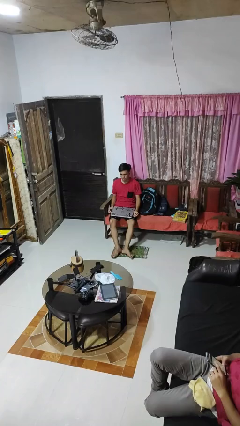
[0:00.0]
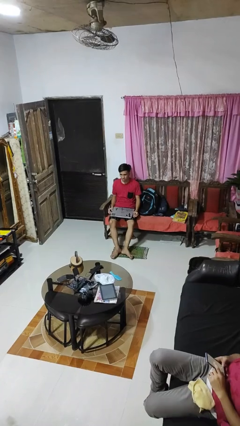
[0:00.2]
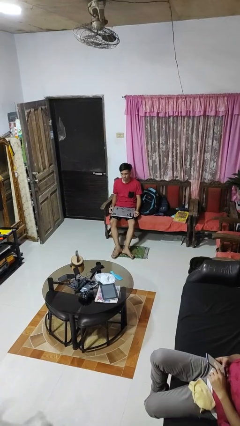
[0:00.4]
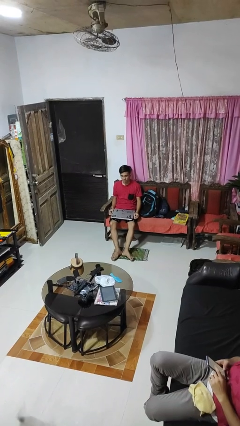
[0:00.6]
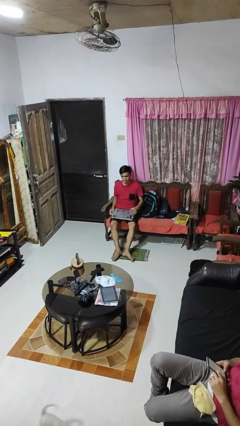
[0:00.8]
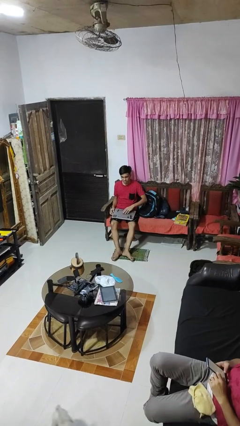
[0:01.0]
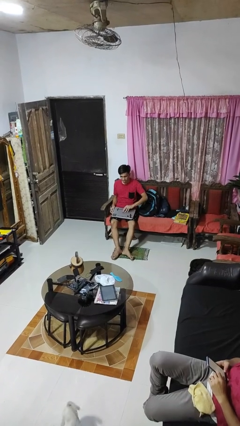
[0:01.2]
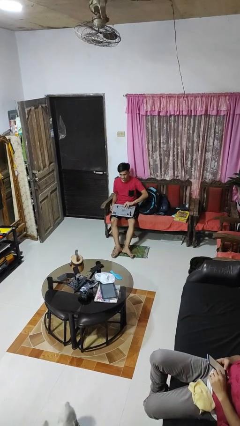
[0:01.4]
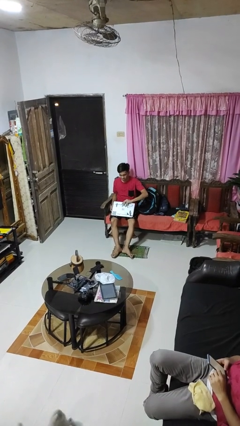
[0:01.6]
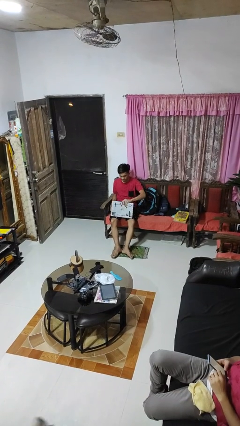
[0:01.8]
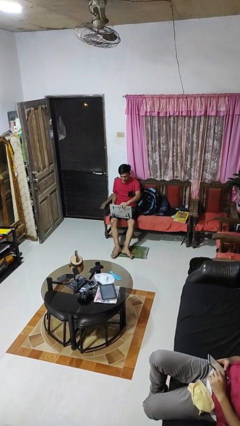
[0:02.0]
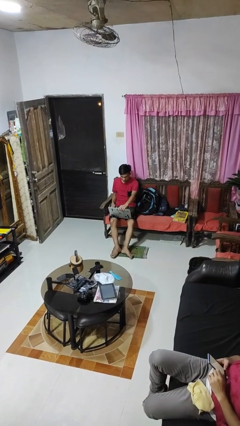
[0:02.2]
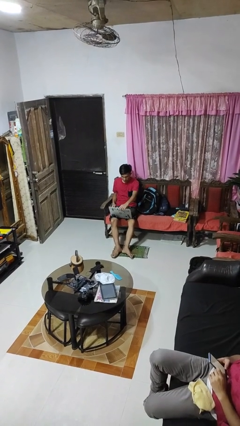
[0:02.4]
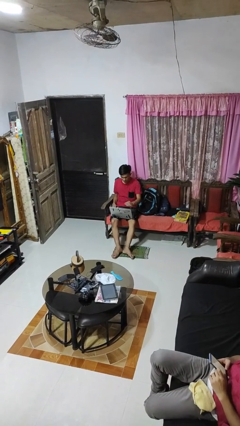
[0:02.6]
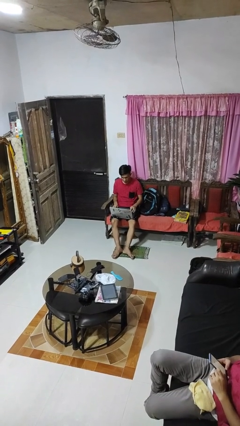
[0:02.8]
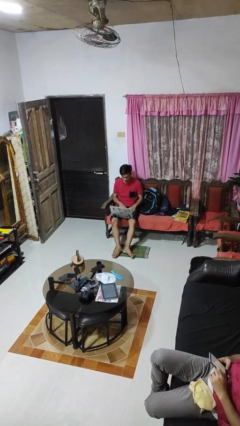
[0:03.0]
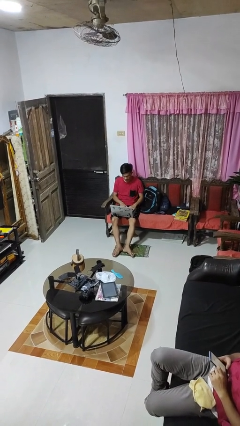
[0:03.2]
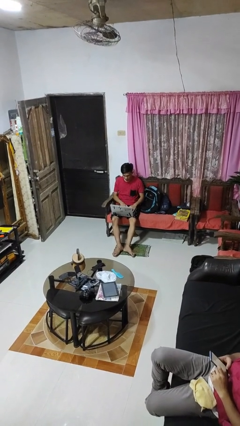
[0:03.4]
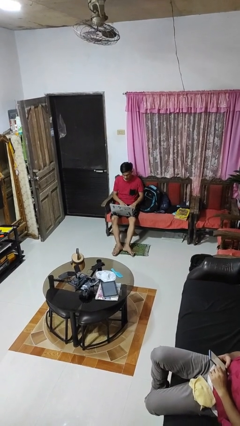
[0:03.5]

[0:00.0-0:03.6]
person opens laptop

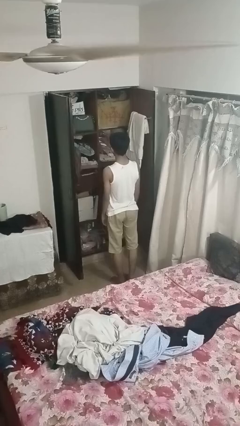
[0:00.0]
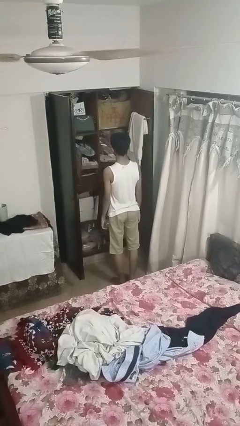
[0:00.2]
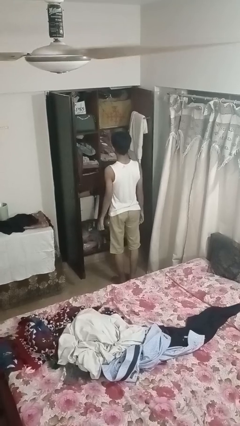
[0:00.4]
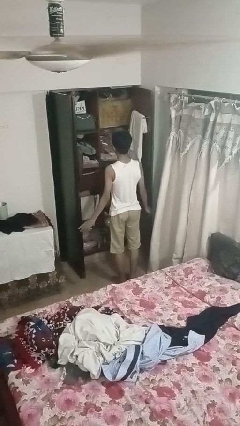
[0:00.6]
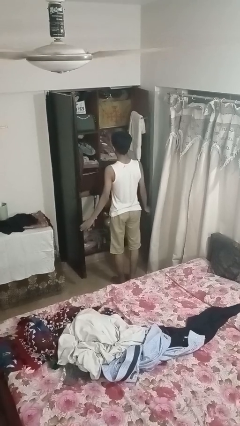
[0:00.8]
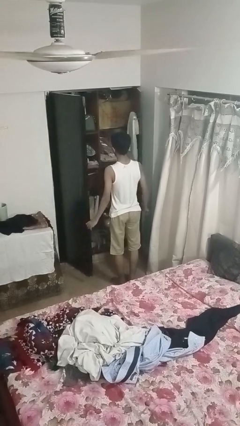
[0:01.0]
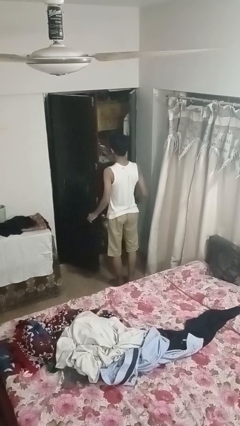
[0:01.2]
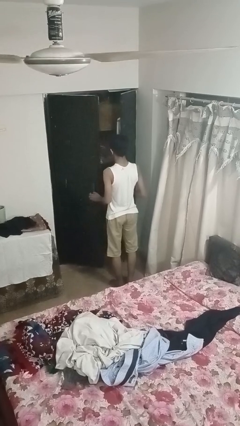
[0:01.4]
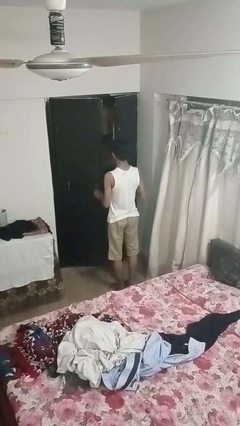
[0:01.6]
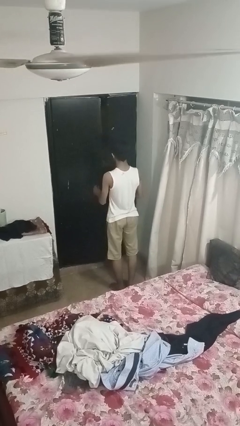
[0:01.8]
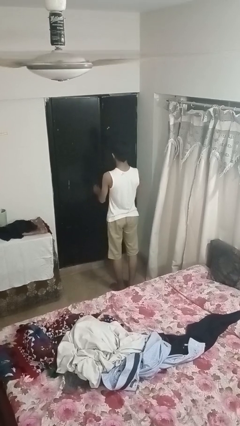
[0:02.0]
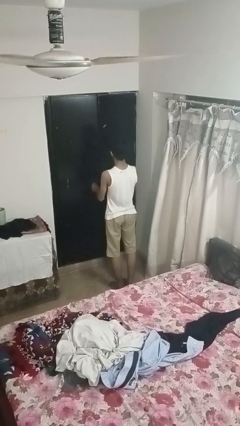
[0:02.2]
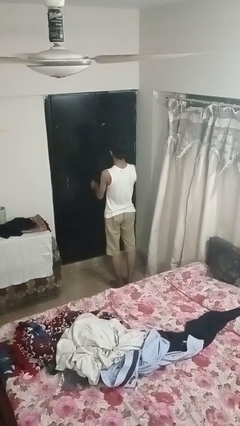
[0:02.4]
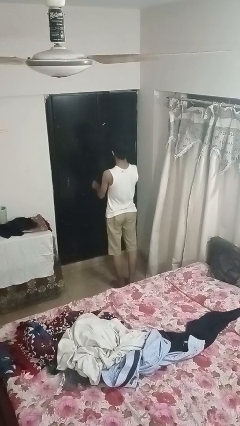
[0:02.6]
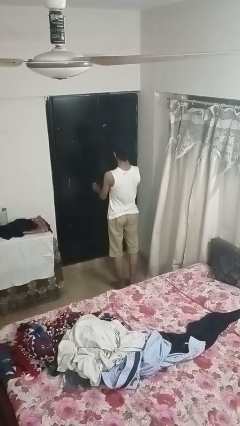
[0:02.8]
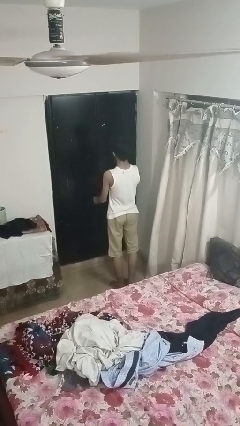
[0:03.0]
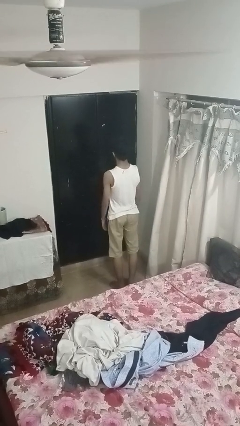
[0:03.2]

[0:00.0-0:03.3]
person closes closet door

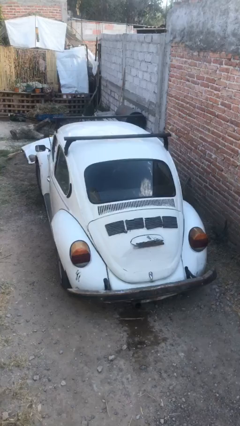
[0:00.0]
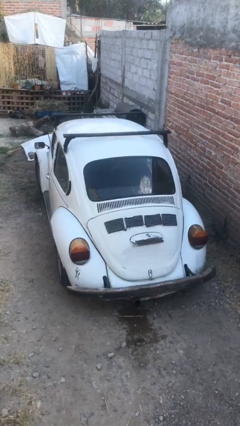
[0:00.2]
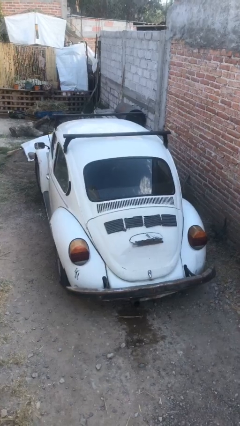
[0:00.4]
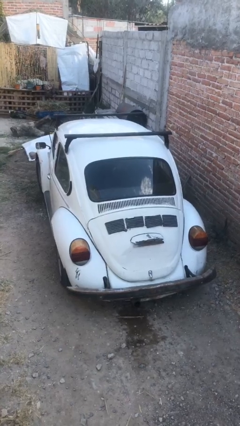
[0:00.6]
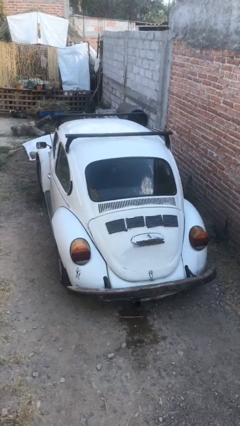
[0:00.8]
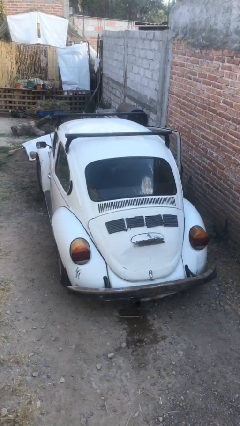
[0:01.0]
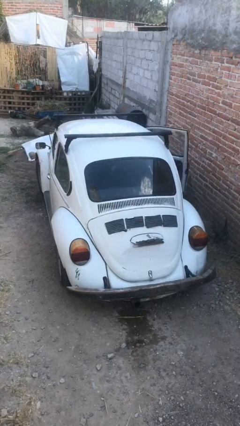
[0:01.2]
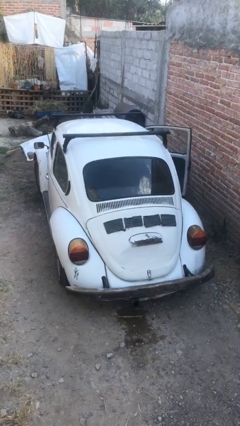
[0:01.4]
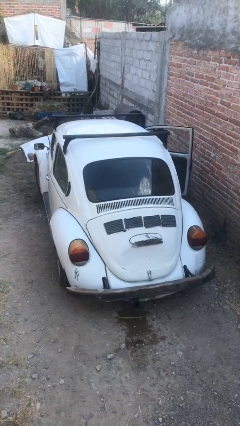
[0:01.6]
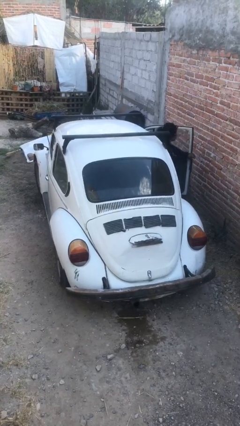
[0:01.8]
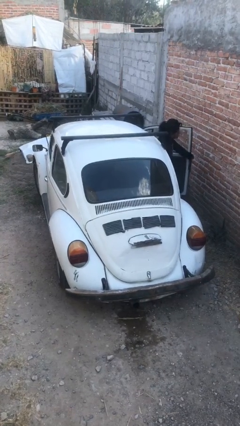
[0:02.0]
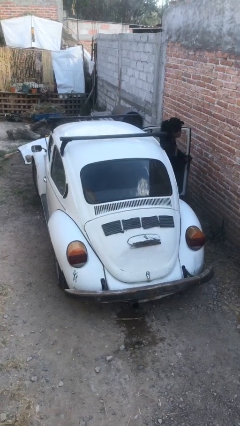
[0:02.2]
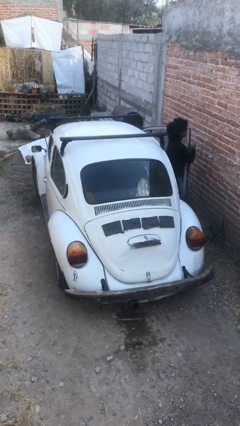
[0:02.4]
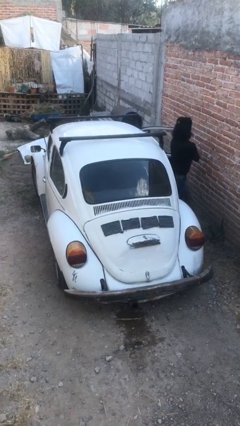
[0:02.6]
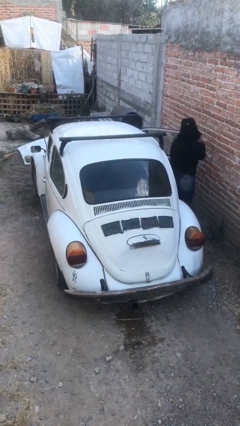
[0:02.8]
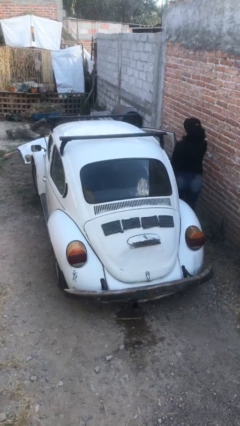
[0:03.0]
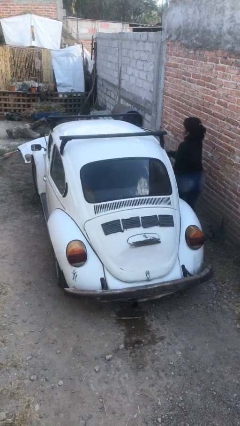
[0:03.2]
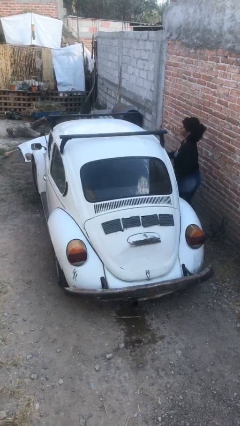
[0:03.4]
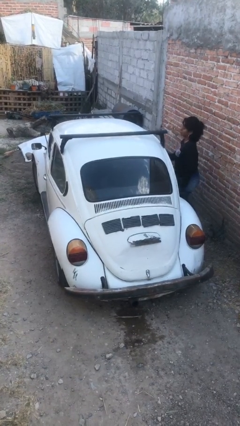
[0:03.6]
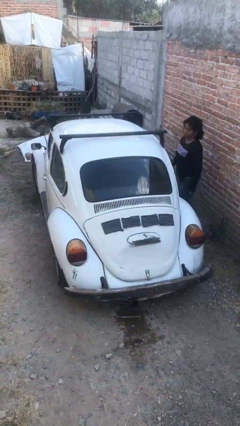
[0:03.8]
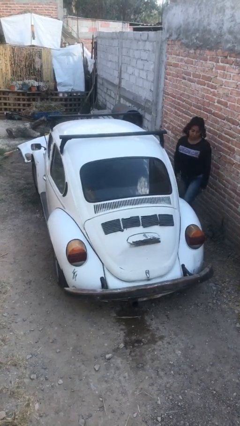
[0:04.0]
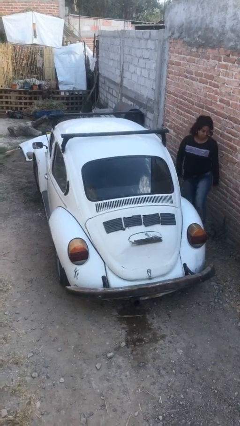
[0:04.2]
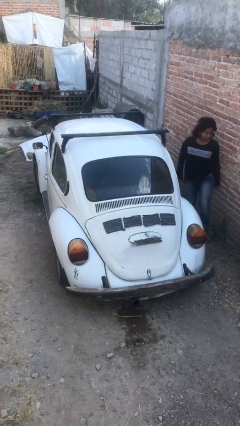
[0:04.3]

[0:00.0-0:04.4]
car drops off person

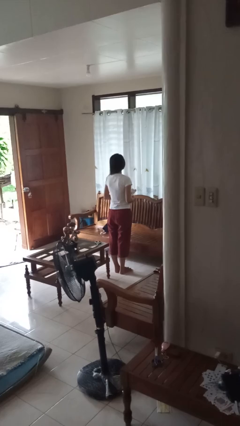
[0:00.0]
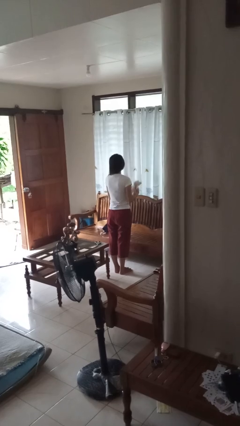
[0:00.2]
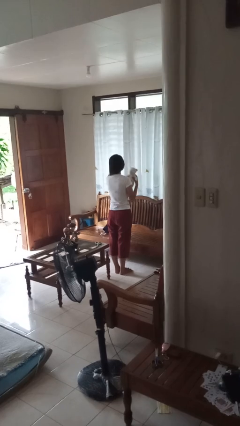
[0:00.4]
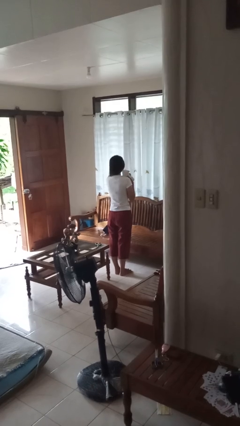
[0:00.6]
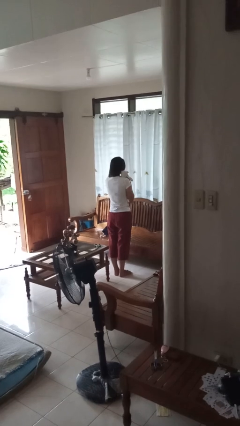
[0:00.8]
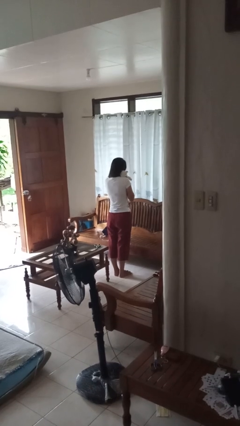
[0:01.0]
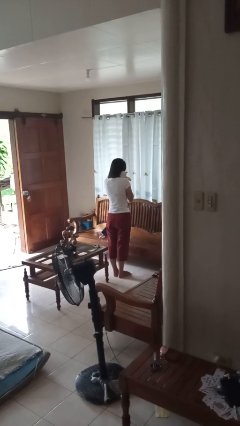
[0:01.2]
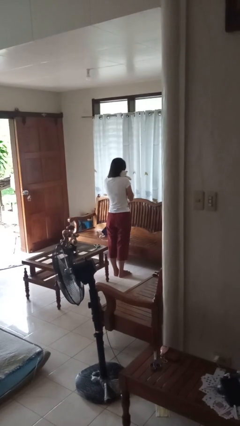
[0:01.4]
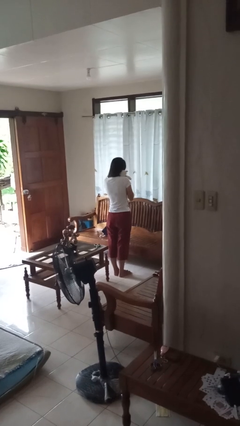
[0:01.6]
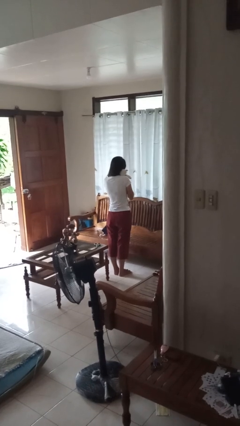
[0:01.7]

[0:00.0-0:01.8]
person hugs stuffed animal

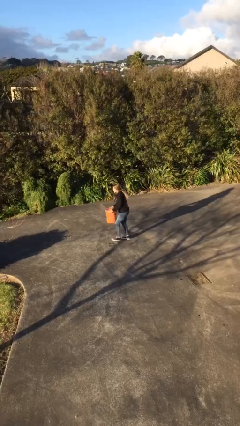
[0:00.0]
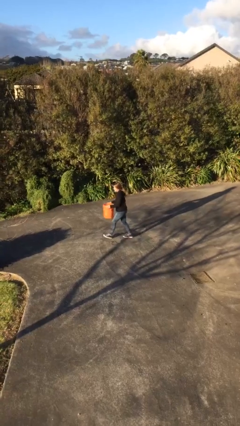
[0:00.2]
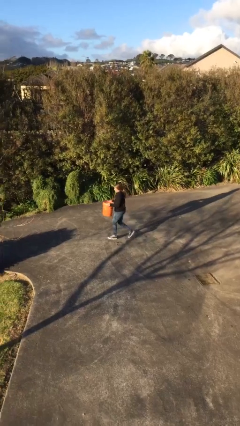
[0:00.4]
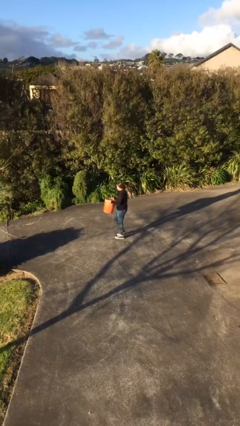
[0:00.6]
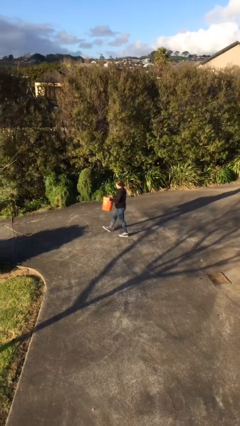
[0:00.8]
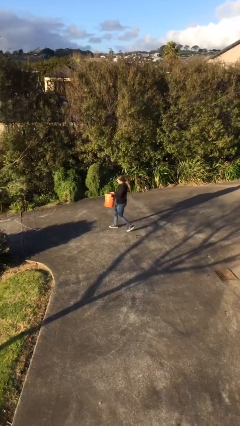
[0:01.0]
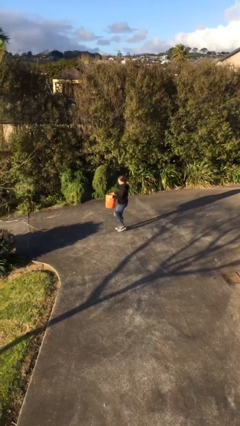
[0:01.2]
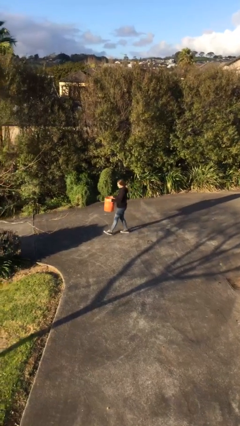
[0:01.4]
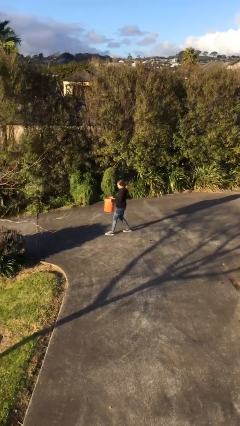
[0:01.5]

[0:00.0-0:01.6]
person carries heavy object

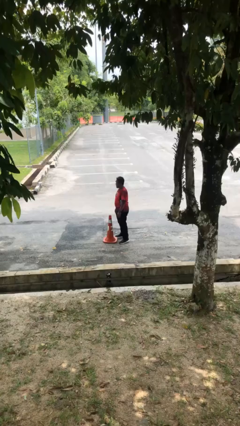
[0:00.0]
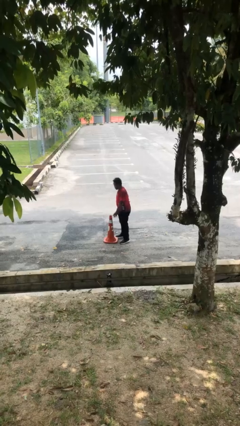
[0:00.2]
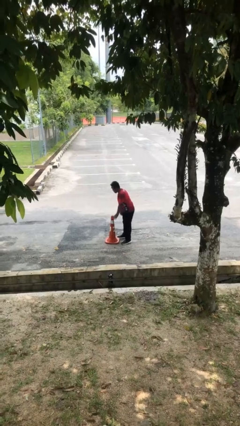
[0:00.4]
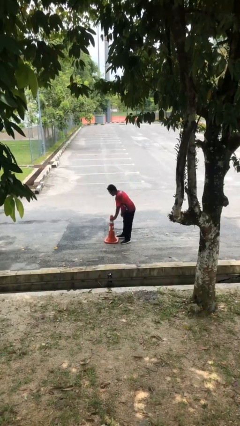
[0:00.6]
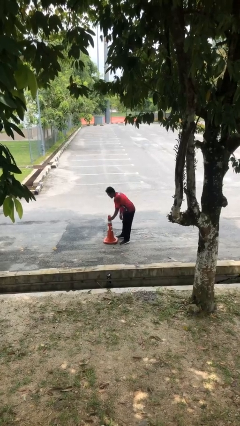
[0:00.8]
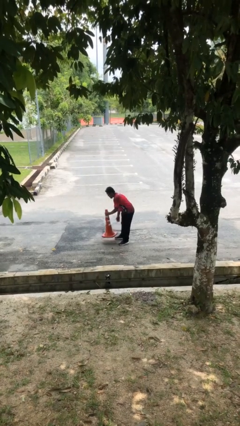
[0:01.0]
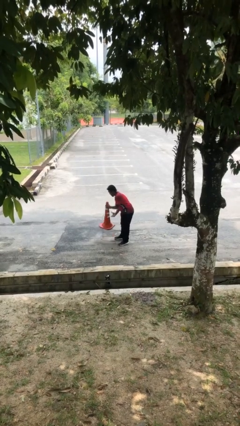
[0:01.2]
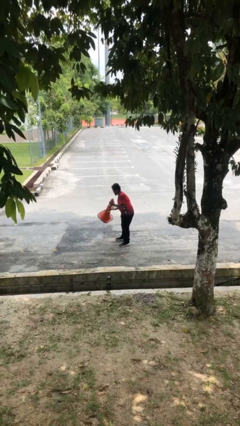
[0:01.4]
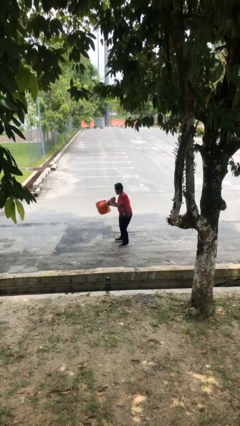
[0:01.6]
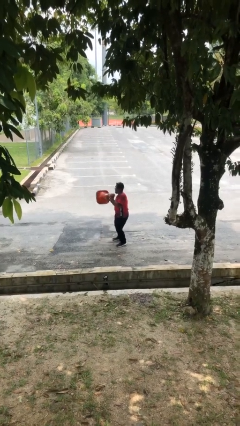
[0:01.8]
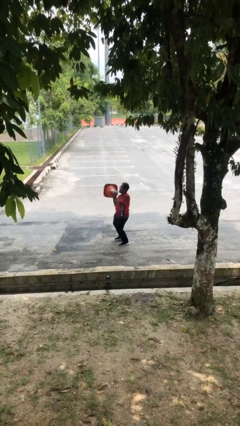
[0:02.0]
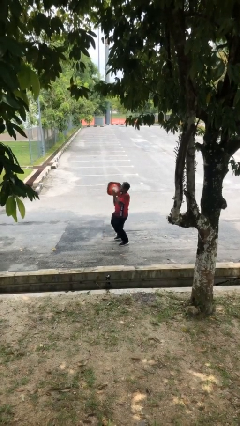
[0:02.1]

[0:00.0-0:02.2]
person picks up object from floor

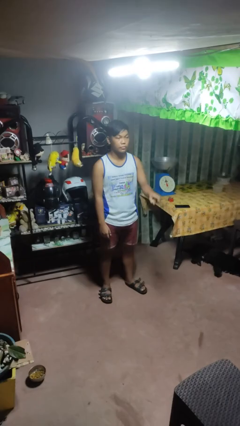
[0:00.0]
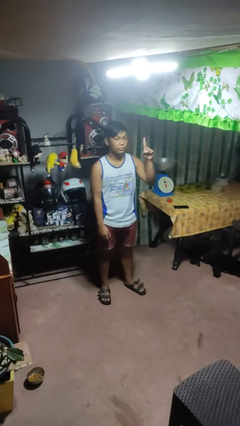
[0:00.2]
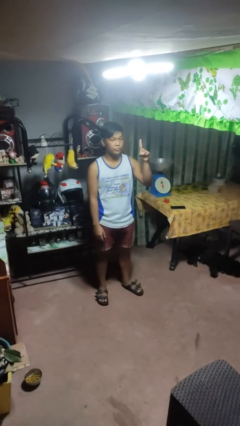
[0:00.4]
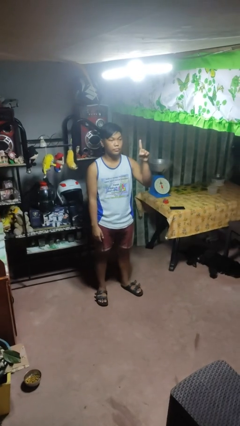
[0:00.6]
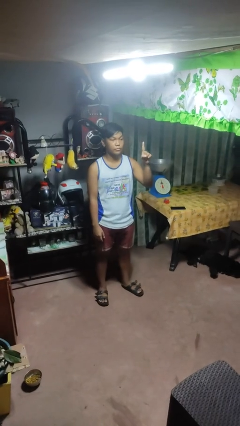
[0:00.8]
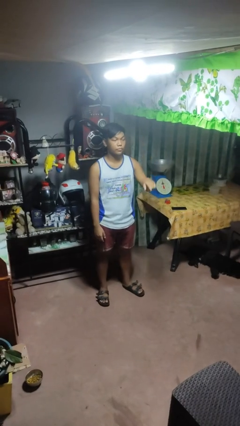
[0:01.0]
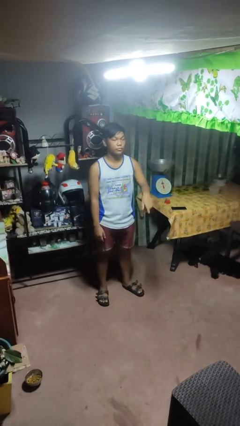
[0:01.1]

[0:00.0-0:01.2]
person gestures number one
